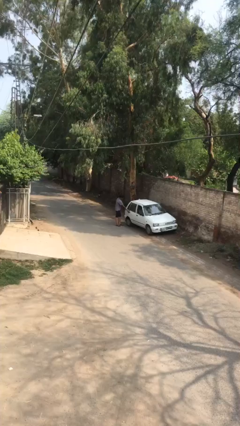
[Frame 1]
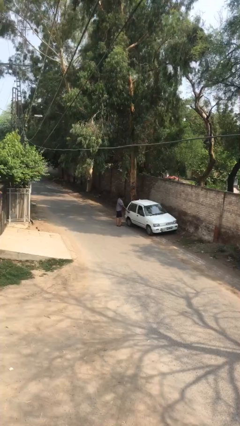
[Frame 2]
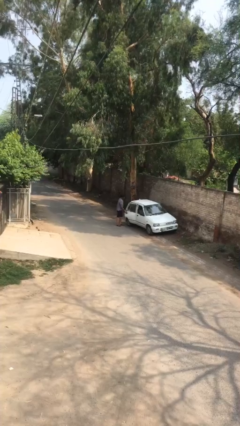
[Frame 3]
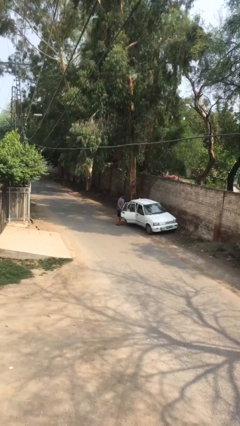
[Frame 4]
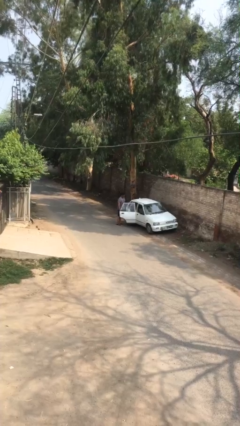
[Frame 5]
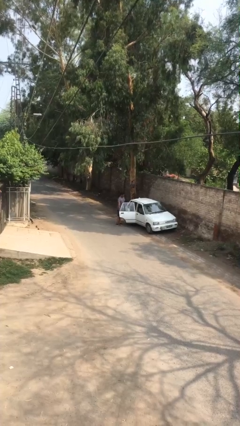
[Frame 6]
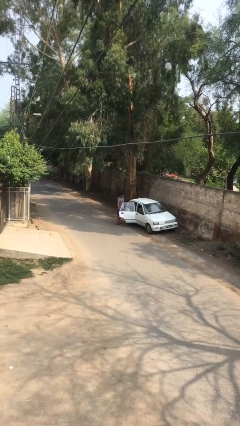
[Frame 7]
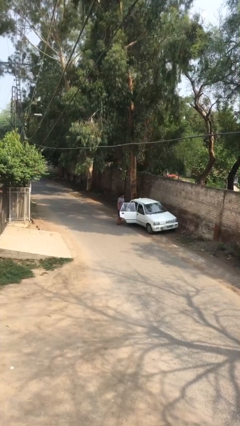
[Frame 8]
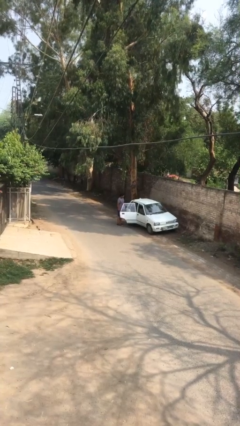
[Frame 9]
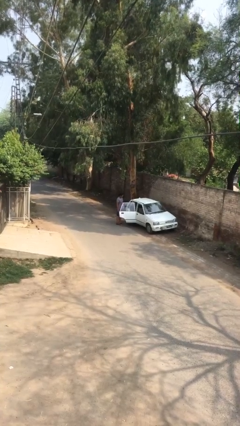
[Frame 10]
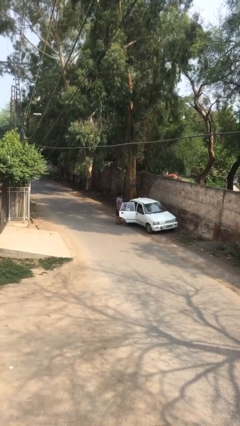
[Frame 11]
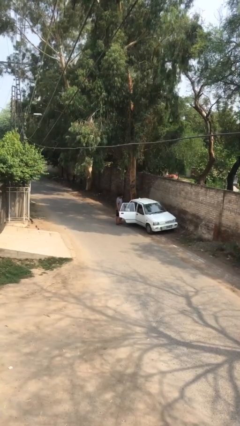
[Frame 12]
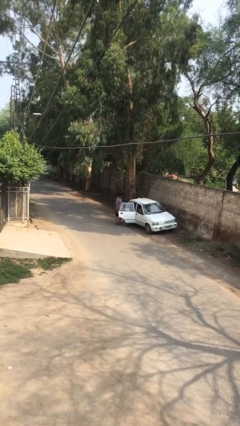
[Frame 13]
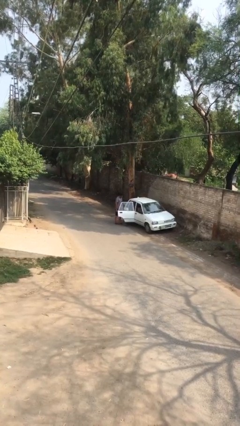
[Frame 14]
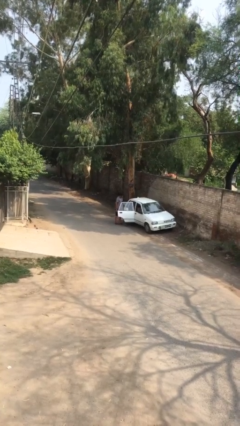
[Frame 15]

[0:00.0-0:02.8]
person opens car door

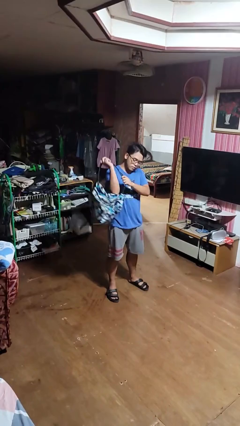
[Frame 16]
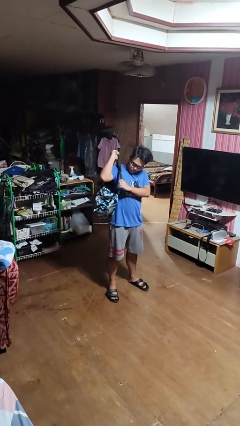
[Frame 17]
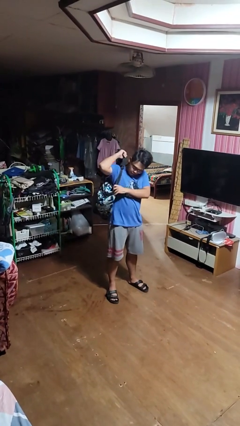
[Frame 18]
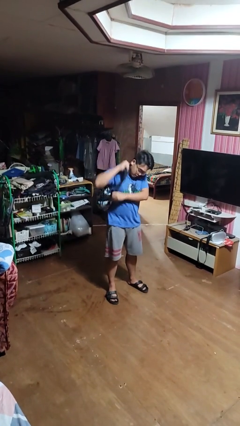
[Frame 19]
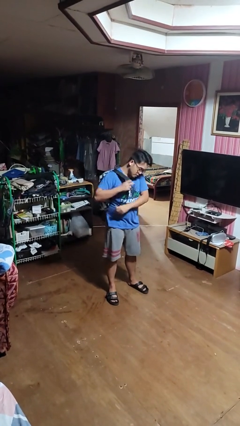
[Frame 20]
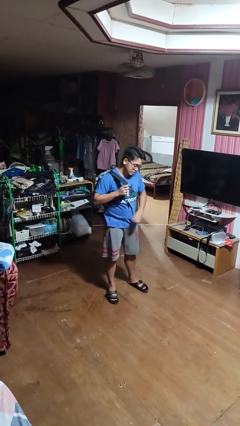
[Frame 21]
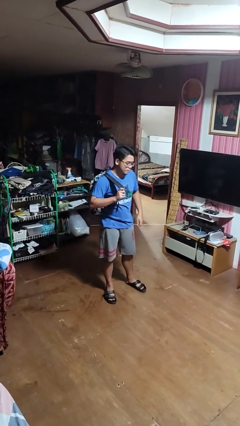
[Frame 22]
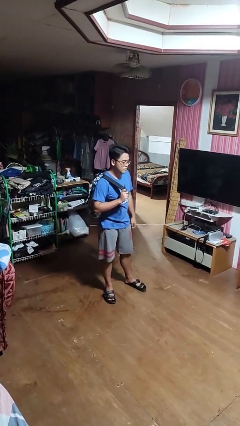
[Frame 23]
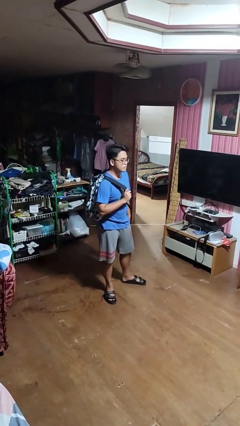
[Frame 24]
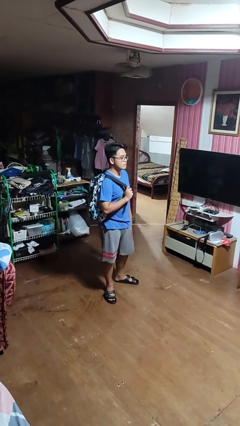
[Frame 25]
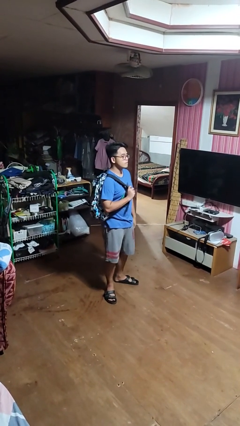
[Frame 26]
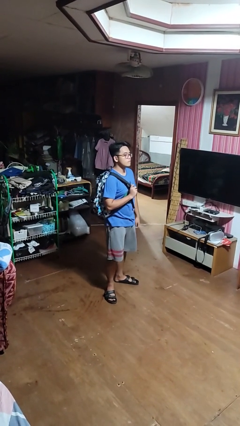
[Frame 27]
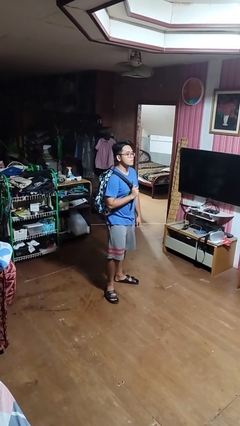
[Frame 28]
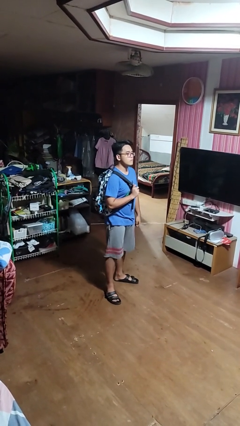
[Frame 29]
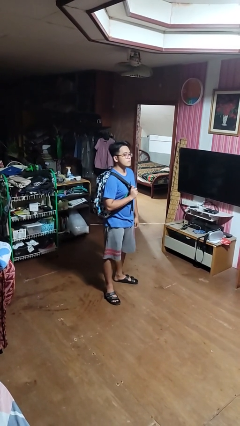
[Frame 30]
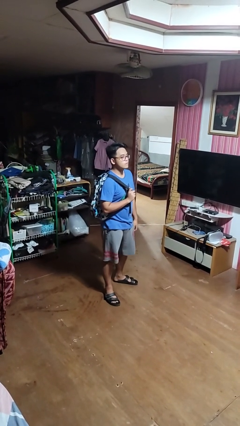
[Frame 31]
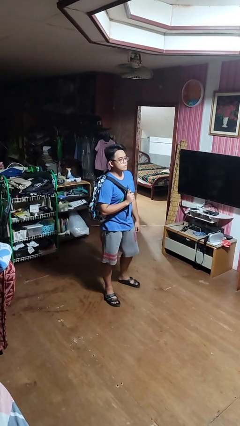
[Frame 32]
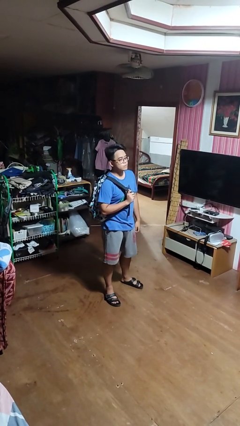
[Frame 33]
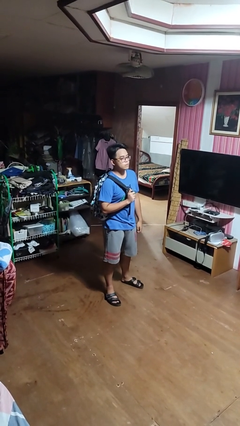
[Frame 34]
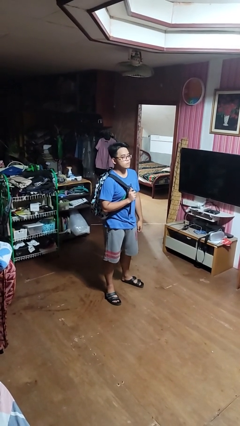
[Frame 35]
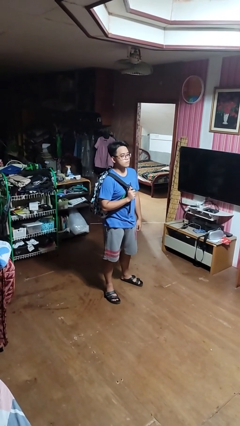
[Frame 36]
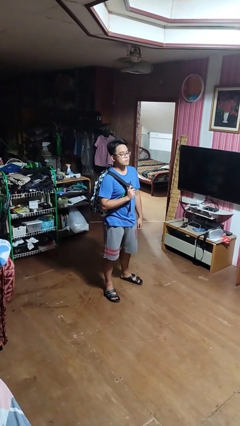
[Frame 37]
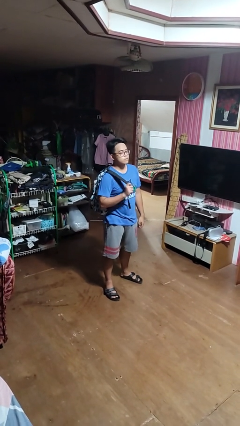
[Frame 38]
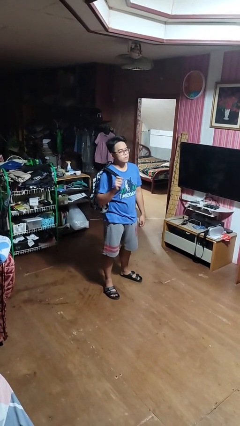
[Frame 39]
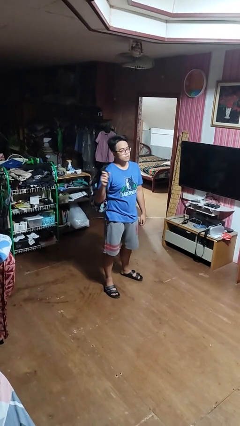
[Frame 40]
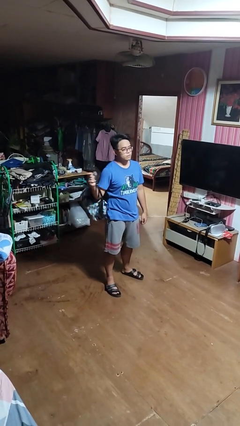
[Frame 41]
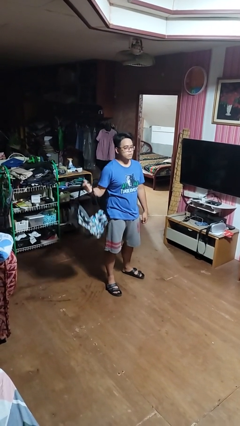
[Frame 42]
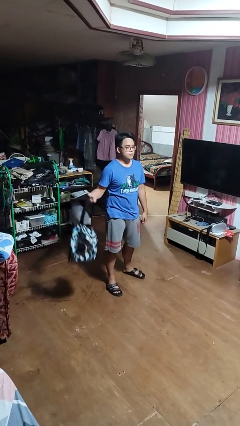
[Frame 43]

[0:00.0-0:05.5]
person puts on backpack

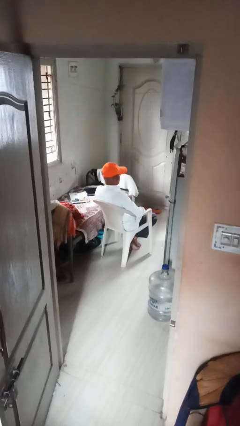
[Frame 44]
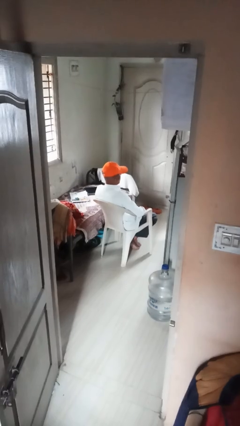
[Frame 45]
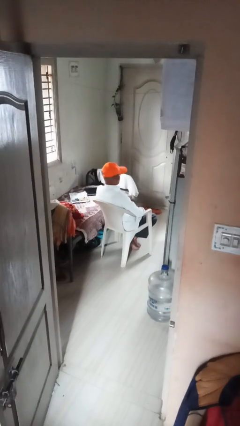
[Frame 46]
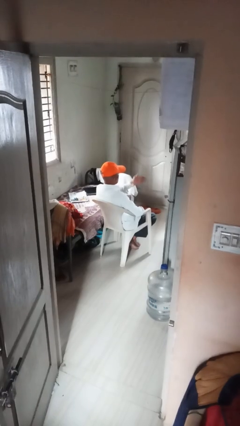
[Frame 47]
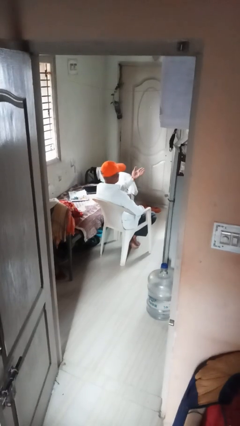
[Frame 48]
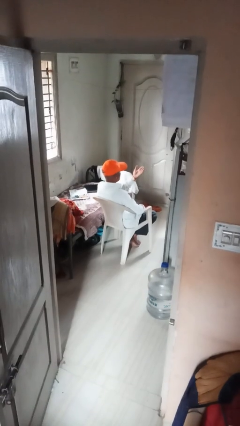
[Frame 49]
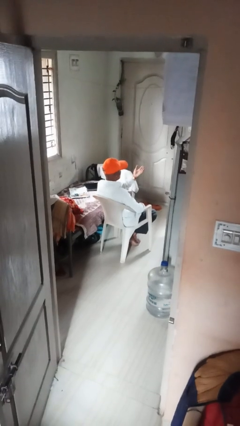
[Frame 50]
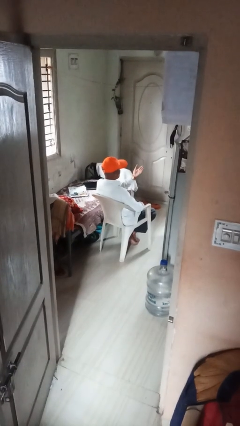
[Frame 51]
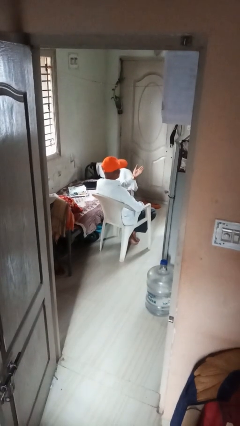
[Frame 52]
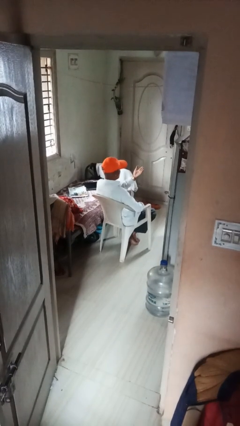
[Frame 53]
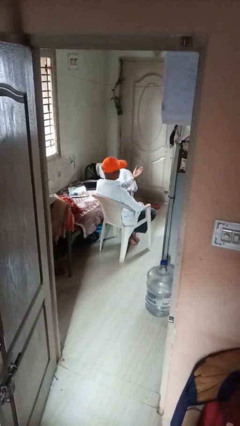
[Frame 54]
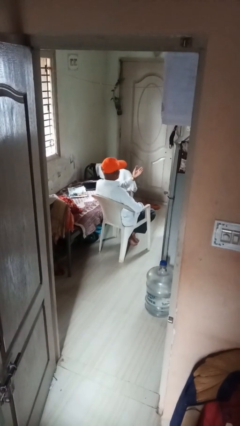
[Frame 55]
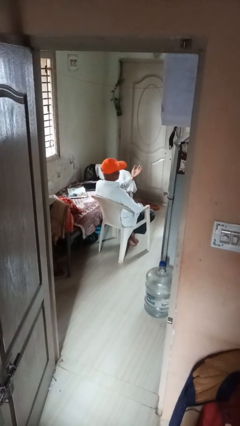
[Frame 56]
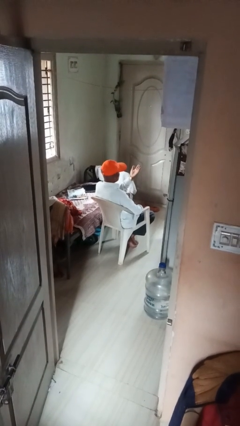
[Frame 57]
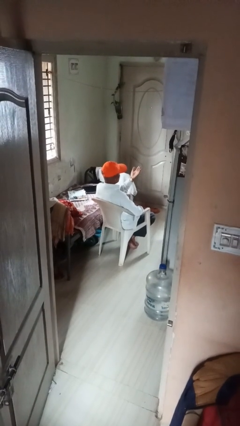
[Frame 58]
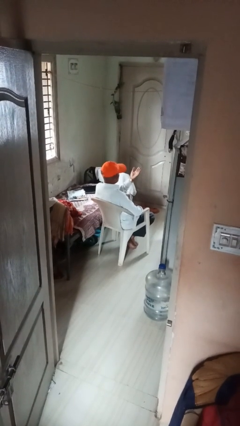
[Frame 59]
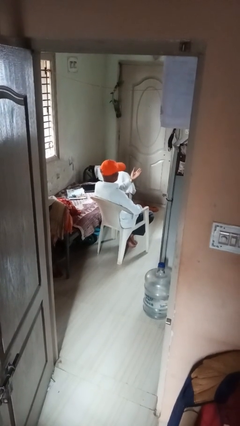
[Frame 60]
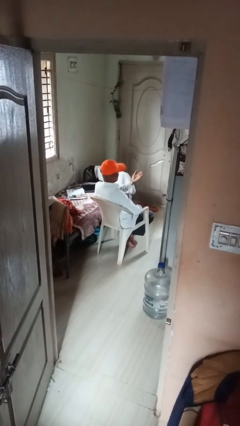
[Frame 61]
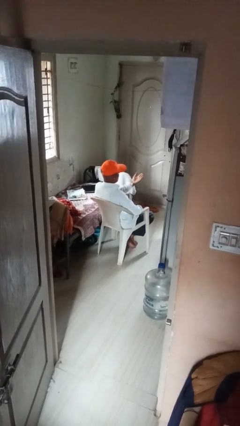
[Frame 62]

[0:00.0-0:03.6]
person looks at hands in lap

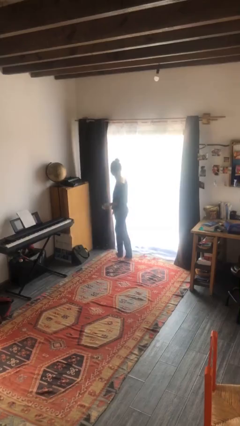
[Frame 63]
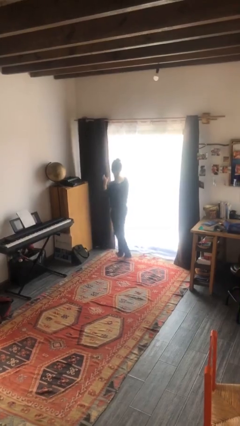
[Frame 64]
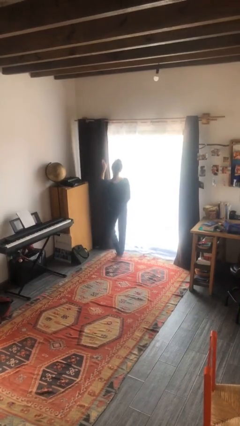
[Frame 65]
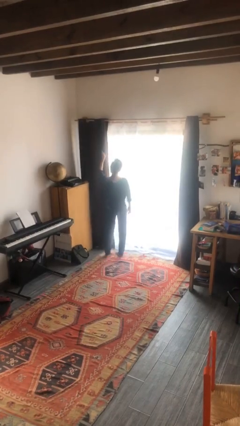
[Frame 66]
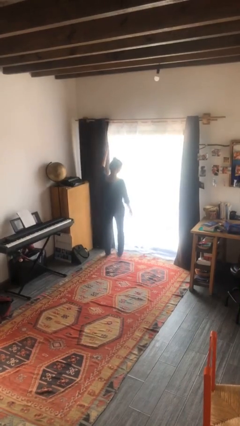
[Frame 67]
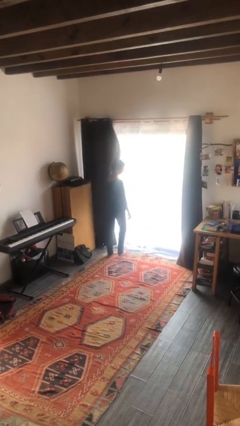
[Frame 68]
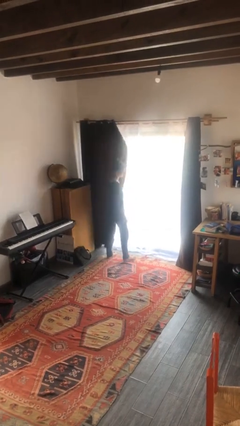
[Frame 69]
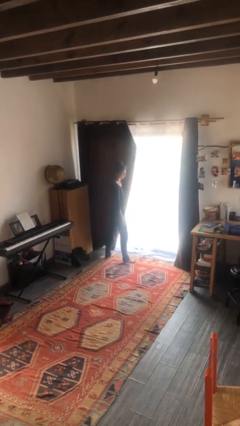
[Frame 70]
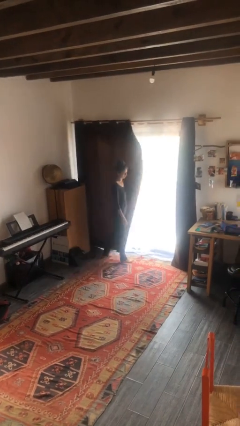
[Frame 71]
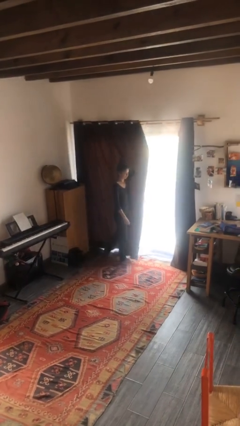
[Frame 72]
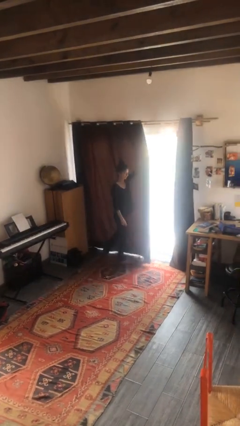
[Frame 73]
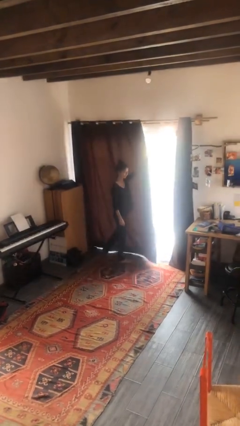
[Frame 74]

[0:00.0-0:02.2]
person closes curtains

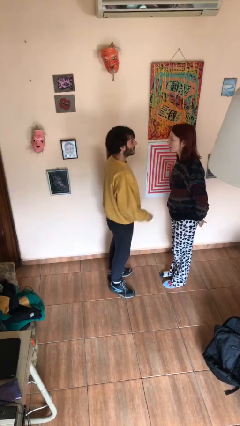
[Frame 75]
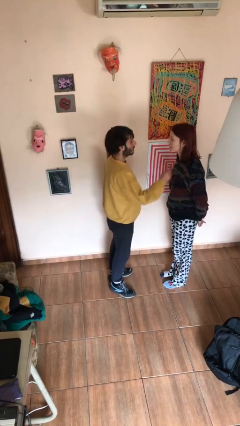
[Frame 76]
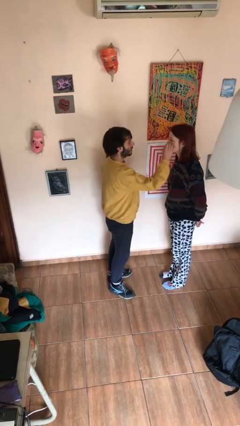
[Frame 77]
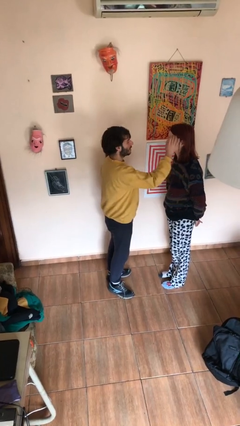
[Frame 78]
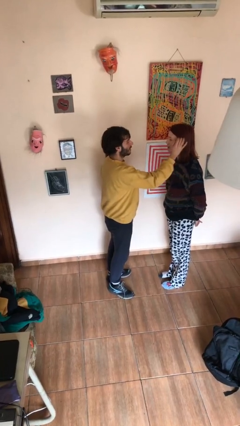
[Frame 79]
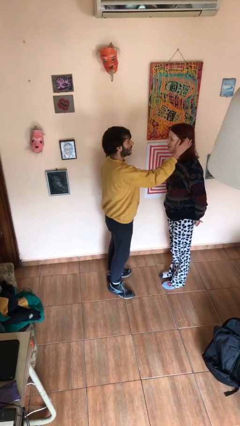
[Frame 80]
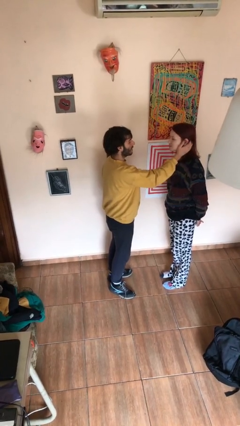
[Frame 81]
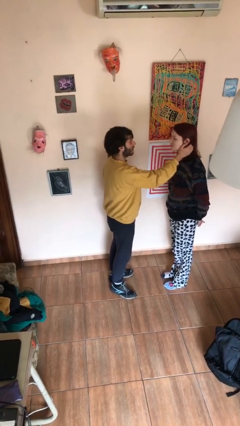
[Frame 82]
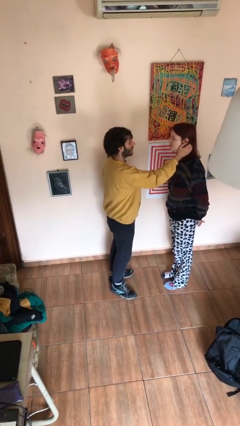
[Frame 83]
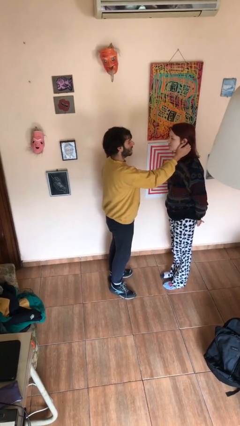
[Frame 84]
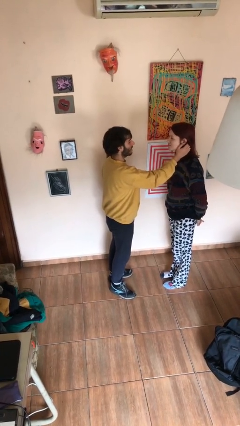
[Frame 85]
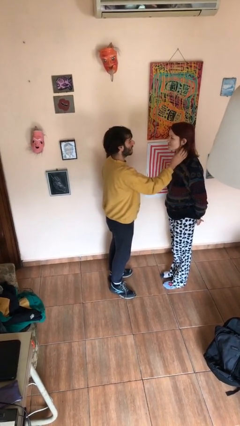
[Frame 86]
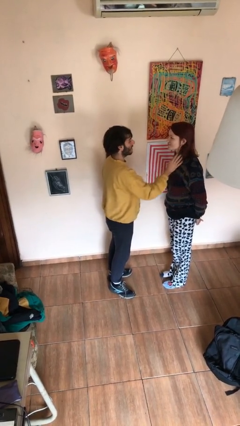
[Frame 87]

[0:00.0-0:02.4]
person touches face of person

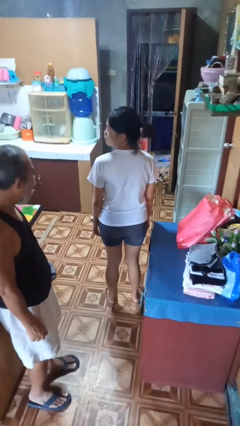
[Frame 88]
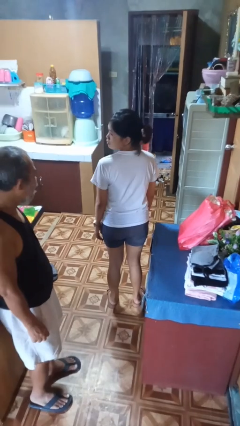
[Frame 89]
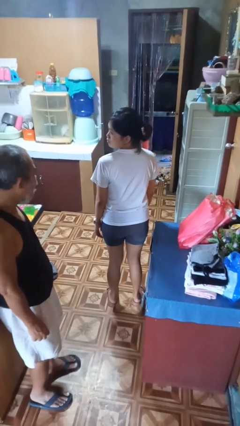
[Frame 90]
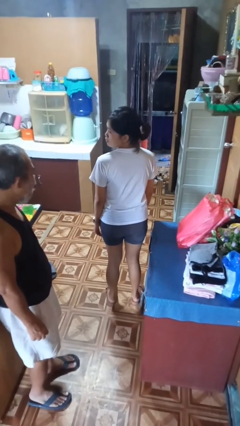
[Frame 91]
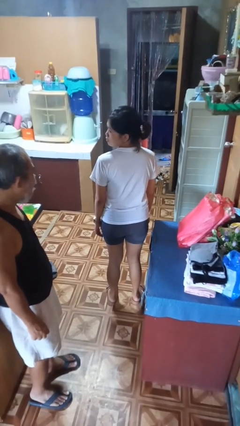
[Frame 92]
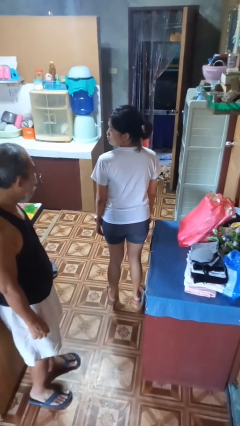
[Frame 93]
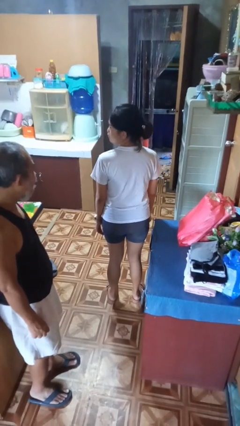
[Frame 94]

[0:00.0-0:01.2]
person looks over shoulder
